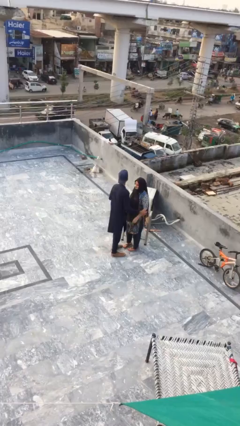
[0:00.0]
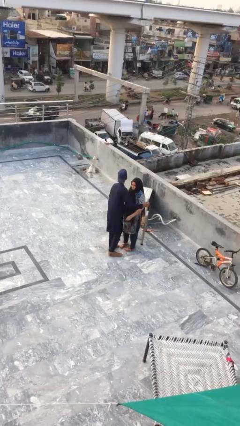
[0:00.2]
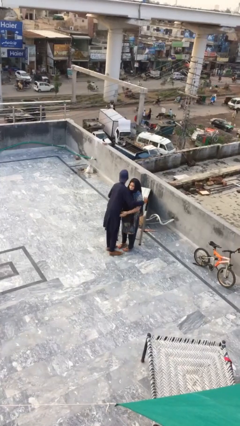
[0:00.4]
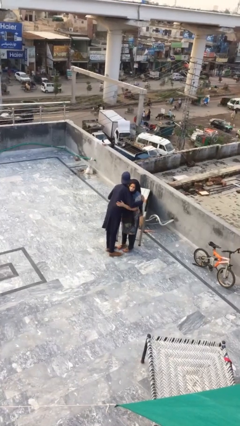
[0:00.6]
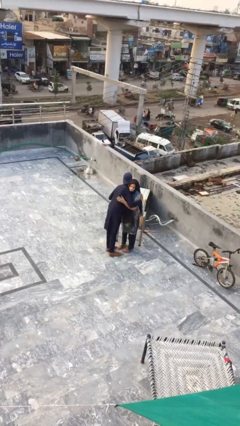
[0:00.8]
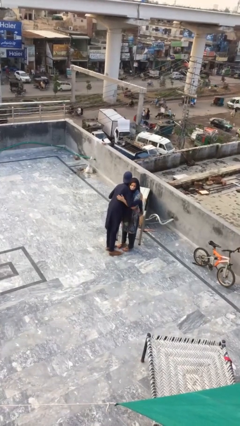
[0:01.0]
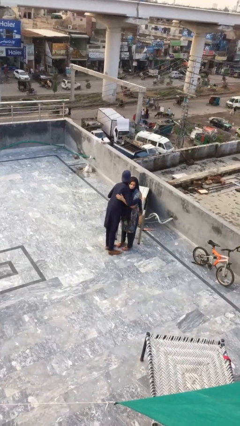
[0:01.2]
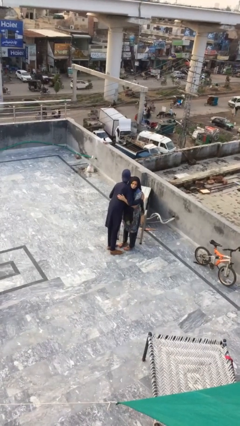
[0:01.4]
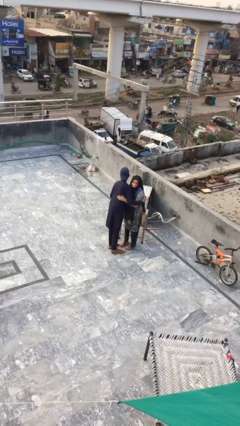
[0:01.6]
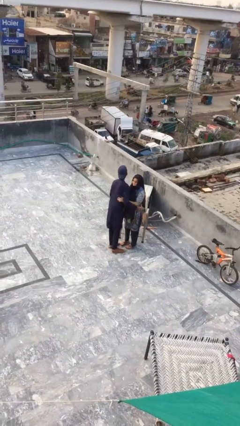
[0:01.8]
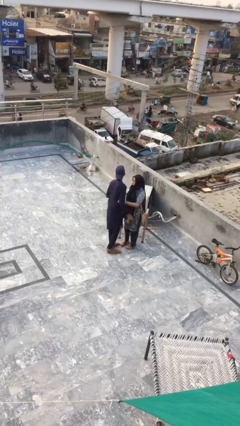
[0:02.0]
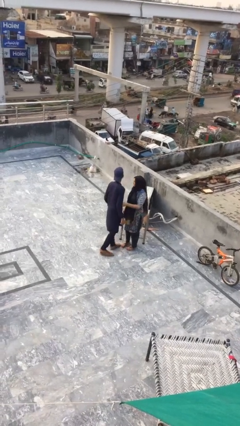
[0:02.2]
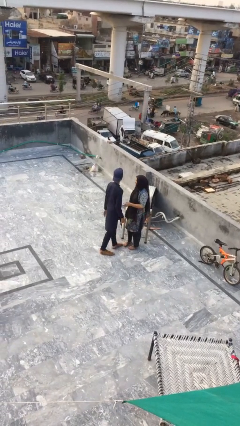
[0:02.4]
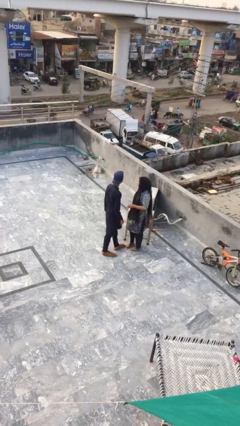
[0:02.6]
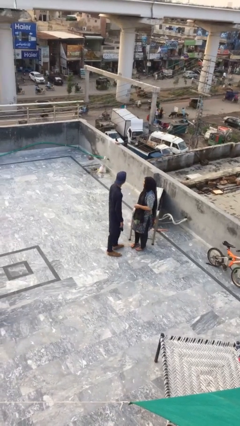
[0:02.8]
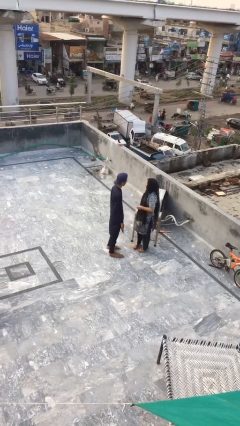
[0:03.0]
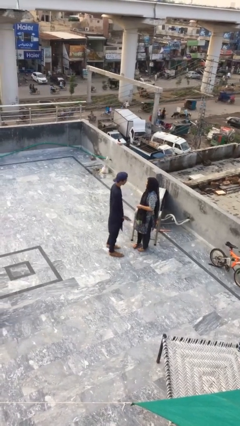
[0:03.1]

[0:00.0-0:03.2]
person embraces person

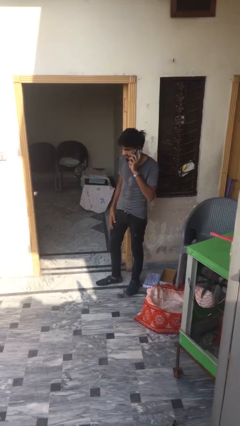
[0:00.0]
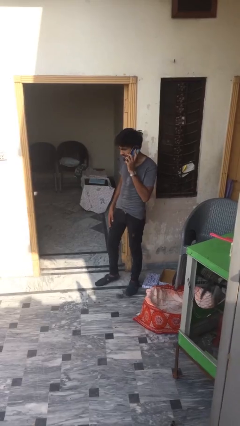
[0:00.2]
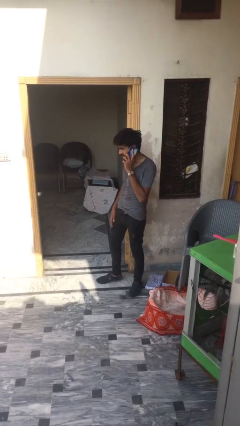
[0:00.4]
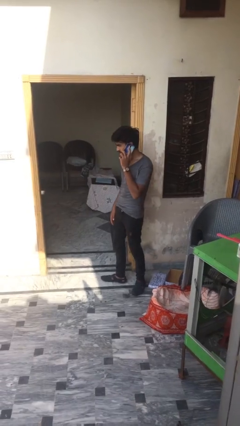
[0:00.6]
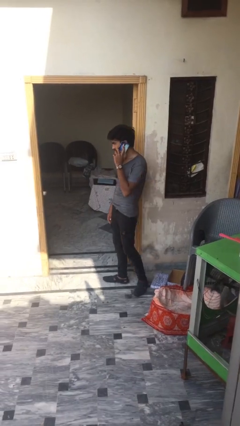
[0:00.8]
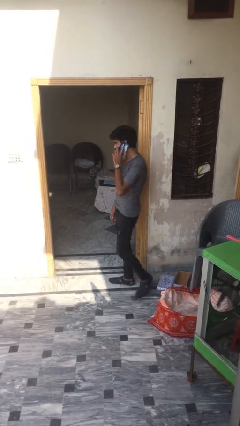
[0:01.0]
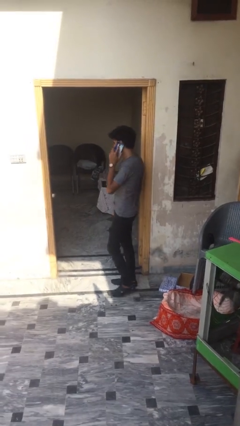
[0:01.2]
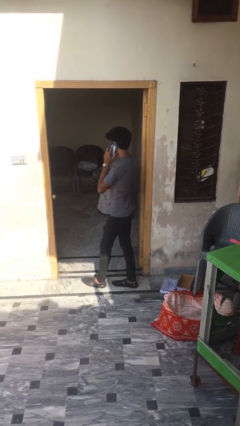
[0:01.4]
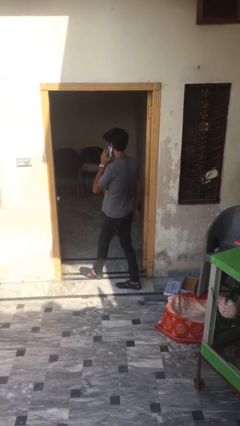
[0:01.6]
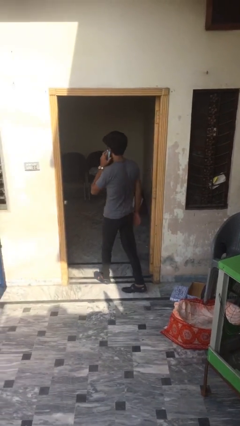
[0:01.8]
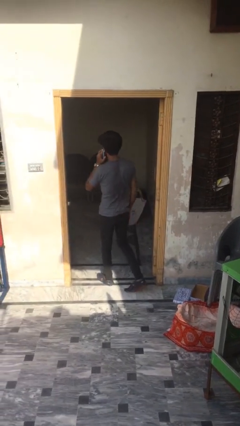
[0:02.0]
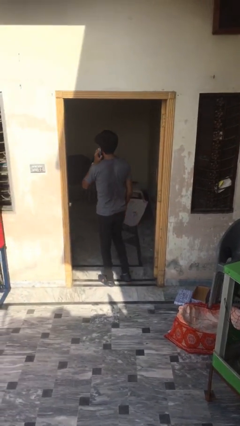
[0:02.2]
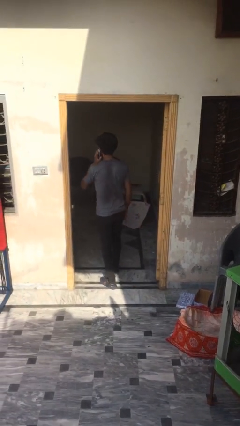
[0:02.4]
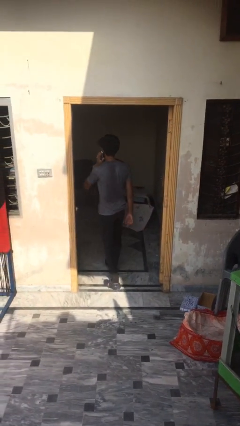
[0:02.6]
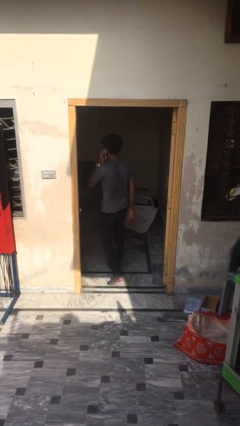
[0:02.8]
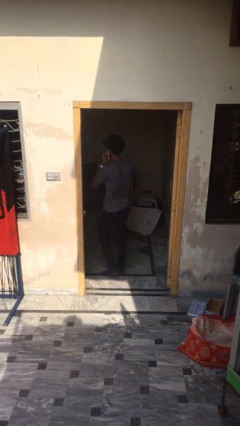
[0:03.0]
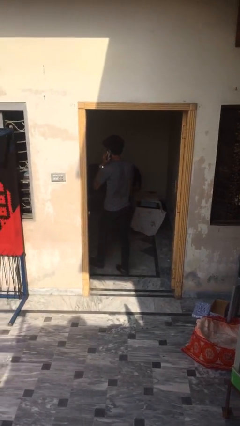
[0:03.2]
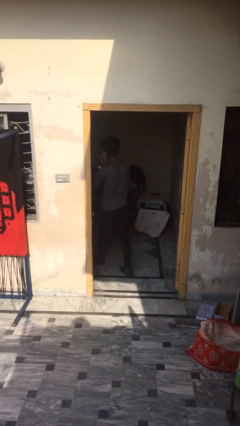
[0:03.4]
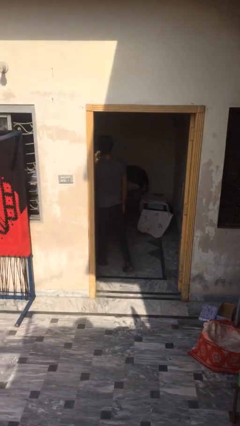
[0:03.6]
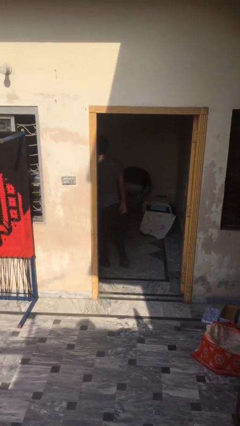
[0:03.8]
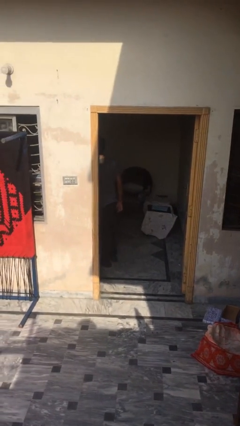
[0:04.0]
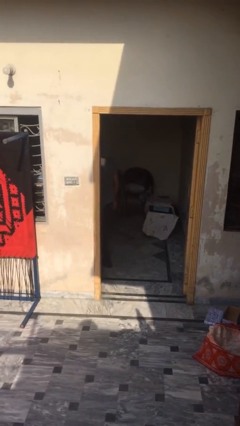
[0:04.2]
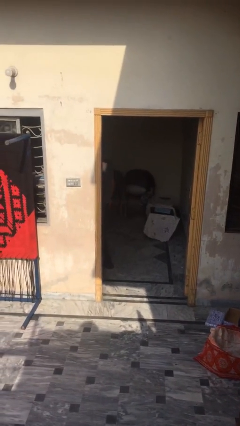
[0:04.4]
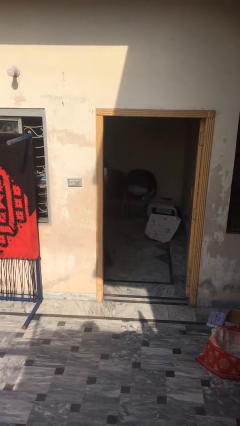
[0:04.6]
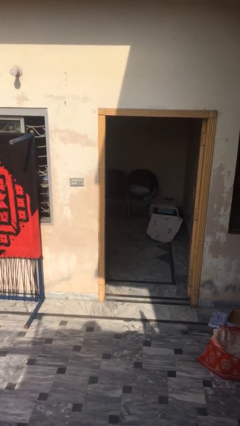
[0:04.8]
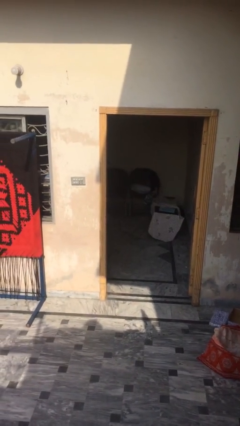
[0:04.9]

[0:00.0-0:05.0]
person exits scene through structure

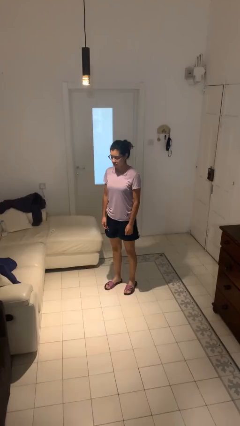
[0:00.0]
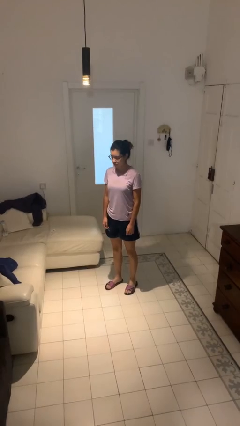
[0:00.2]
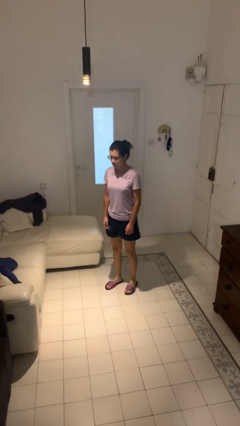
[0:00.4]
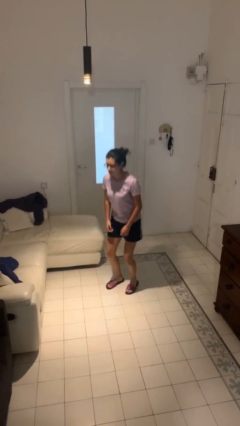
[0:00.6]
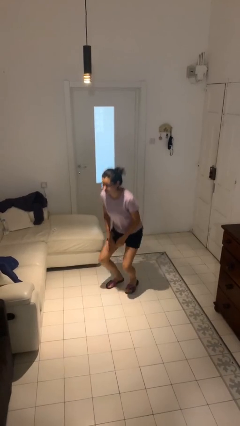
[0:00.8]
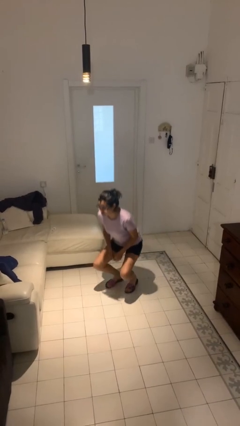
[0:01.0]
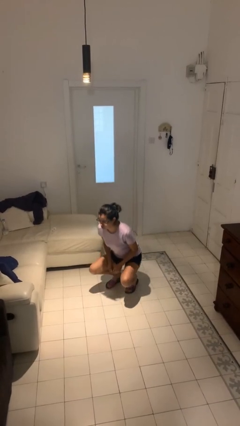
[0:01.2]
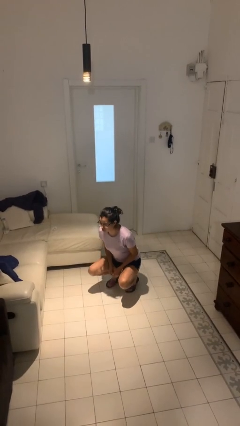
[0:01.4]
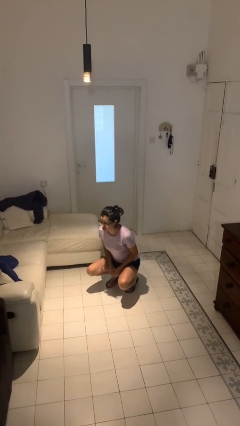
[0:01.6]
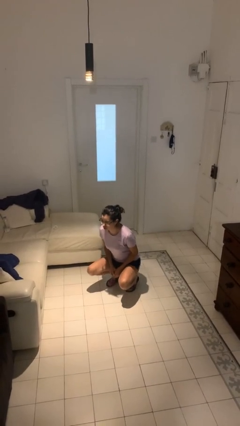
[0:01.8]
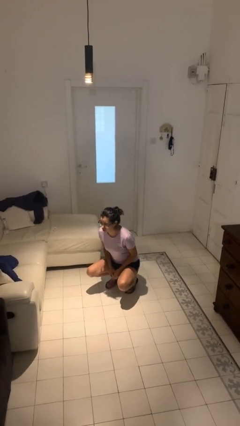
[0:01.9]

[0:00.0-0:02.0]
person squats

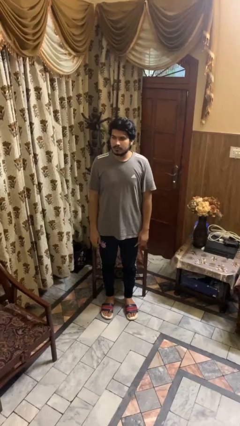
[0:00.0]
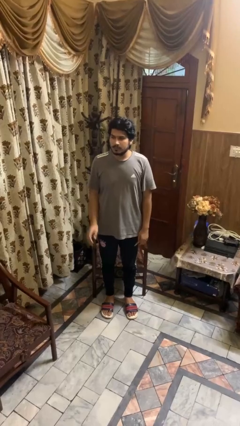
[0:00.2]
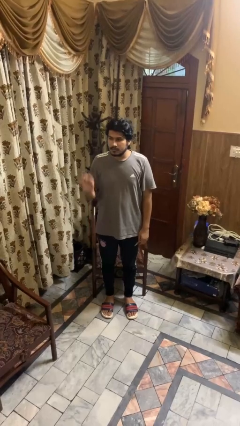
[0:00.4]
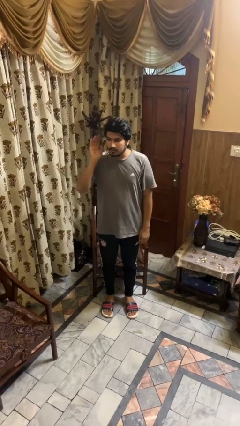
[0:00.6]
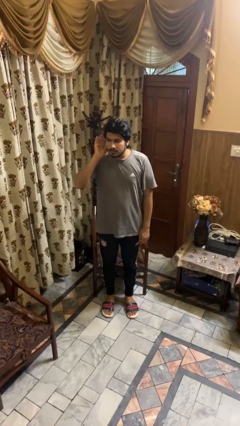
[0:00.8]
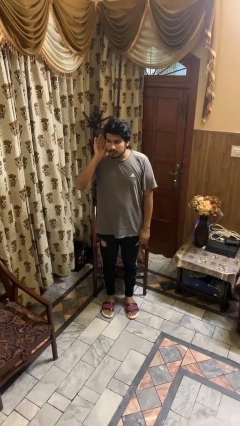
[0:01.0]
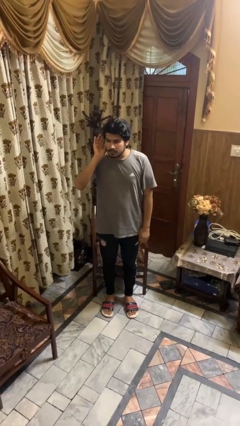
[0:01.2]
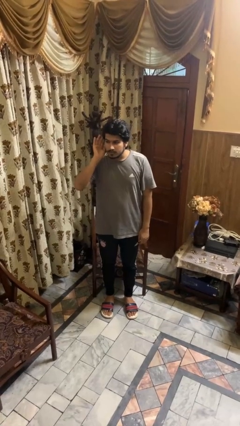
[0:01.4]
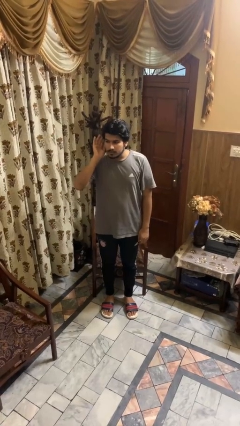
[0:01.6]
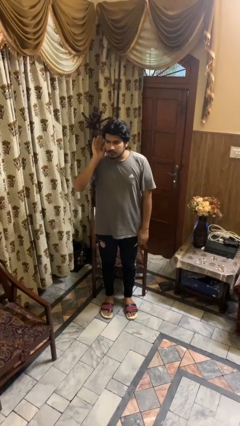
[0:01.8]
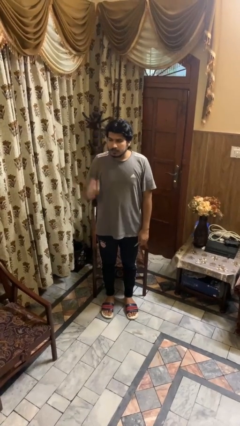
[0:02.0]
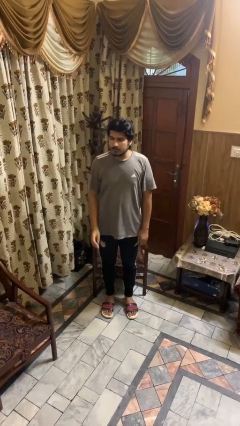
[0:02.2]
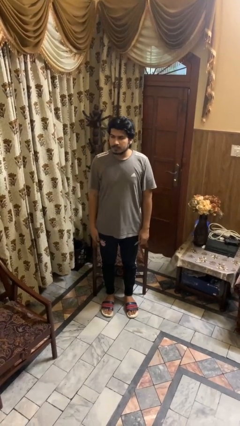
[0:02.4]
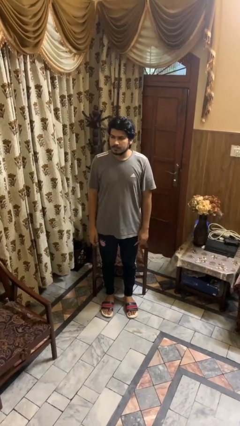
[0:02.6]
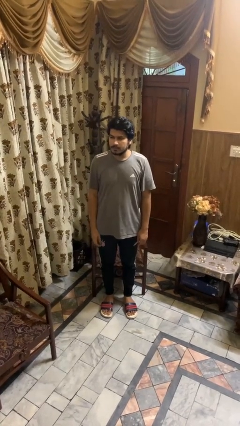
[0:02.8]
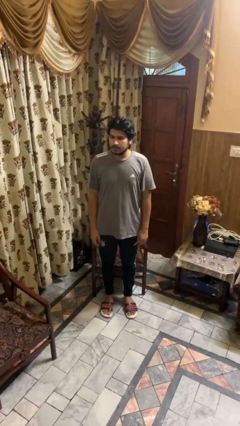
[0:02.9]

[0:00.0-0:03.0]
person gestures listen closely

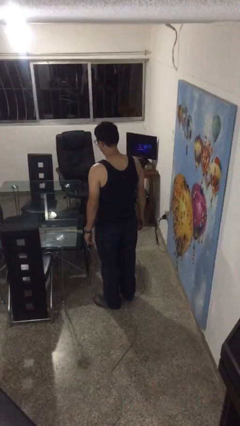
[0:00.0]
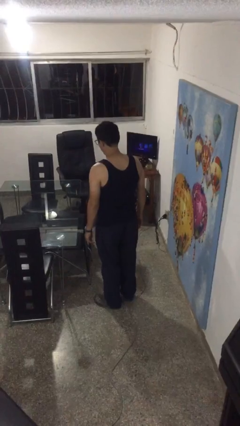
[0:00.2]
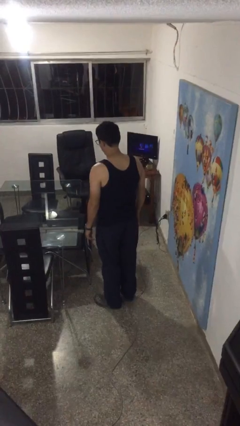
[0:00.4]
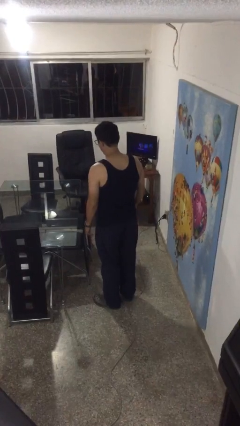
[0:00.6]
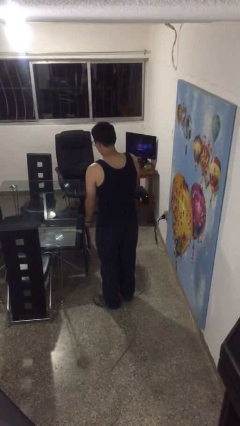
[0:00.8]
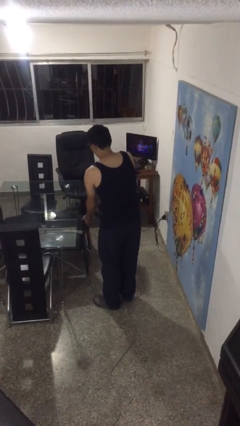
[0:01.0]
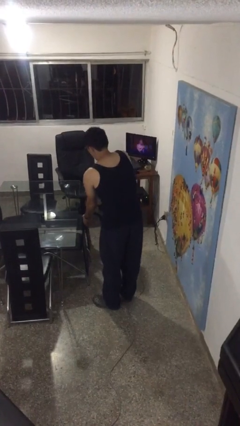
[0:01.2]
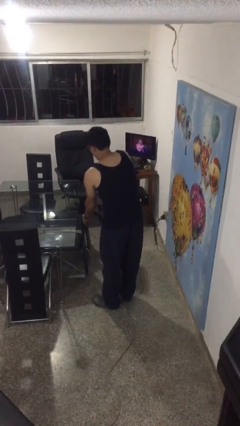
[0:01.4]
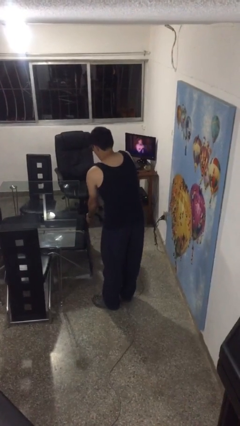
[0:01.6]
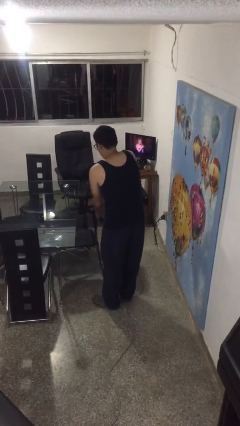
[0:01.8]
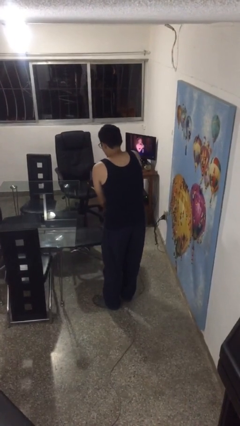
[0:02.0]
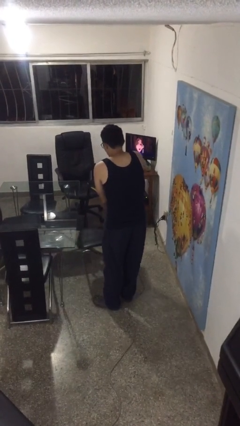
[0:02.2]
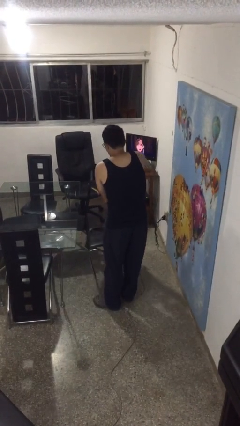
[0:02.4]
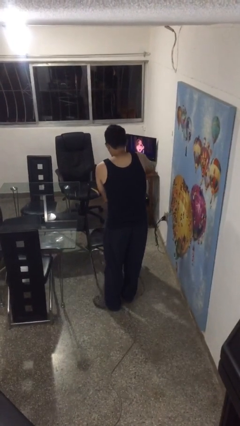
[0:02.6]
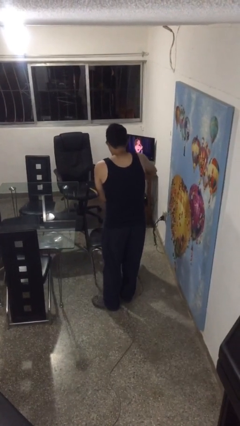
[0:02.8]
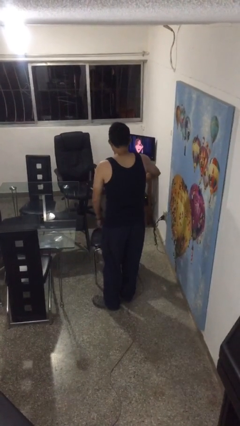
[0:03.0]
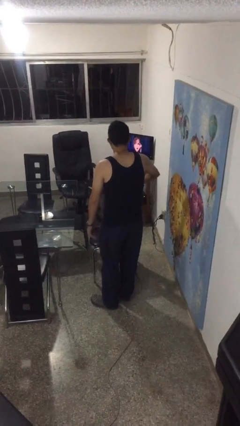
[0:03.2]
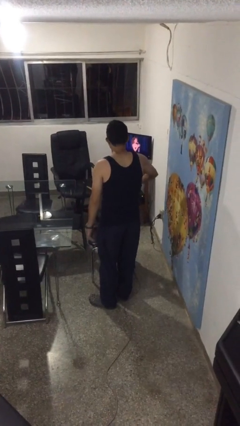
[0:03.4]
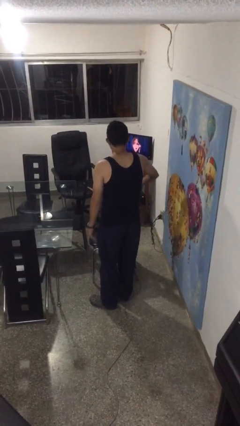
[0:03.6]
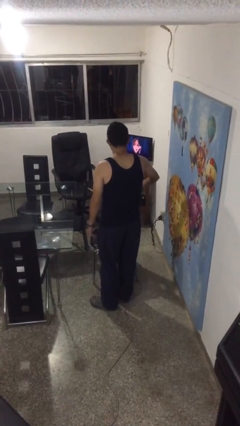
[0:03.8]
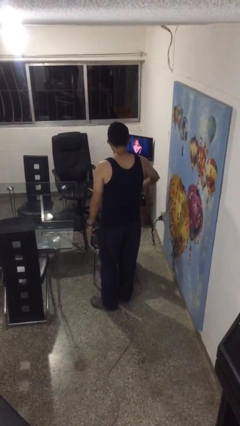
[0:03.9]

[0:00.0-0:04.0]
person pulls out chair

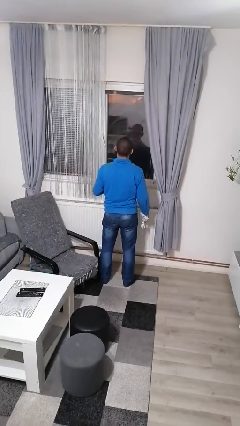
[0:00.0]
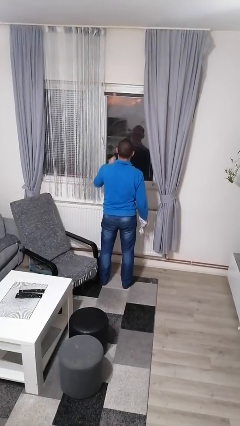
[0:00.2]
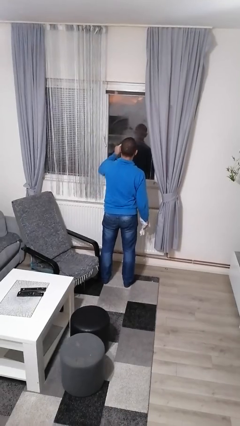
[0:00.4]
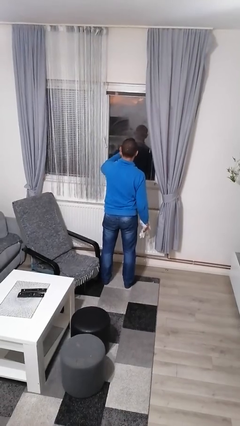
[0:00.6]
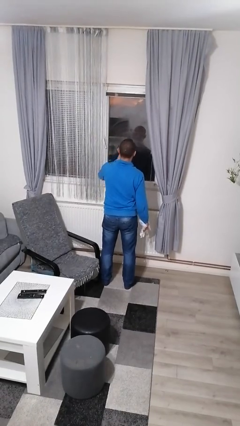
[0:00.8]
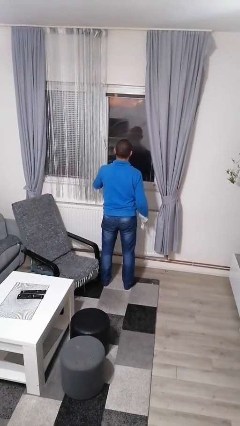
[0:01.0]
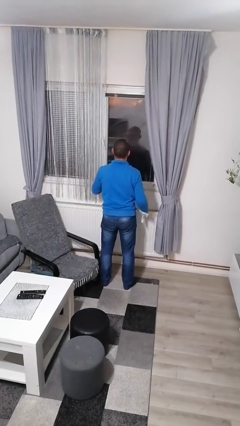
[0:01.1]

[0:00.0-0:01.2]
person sprays from bottle
